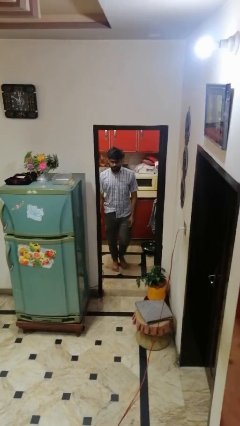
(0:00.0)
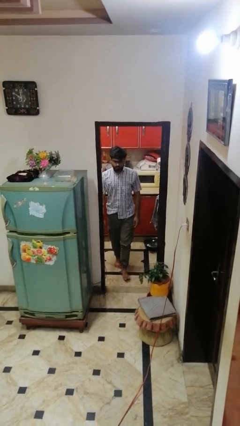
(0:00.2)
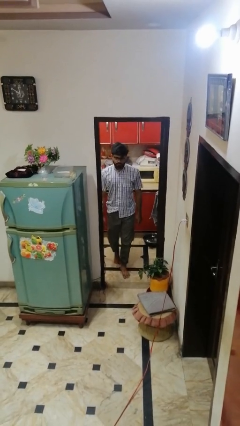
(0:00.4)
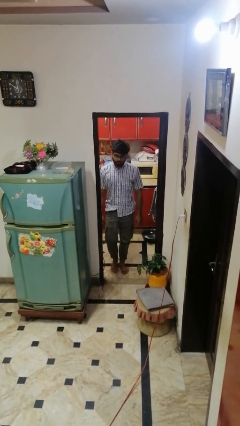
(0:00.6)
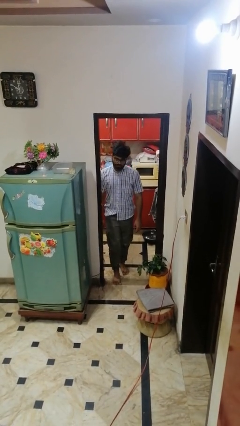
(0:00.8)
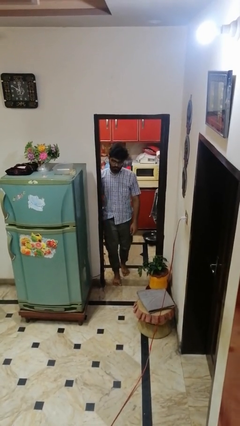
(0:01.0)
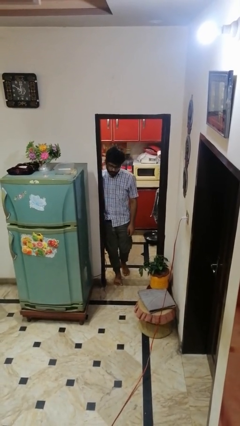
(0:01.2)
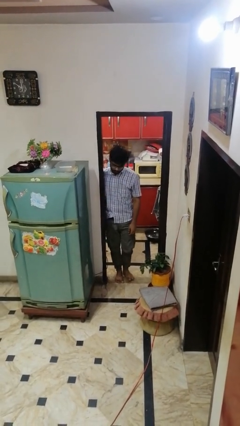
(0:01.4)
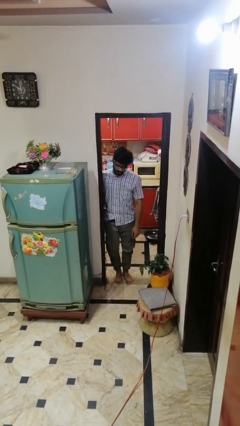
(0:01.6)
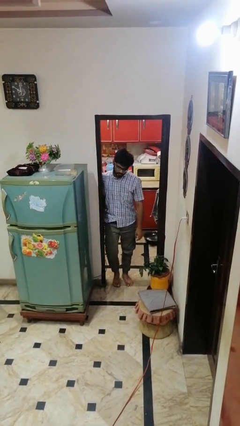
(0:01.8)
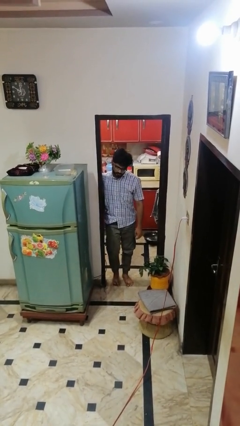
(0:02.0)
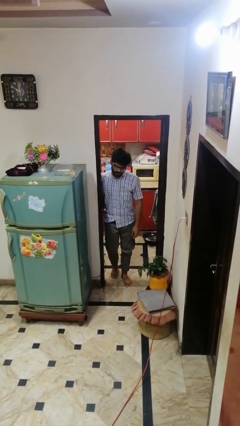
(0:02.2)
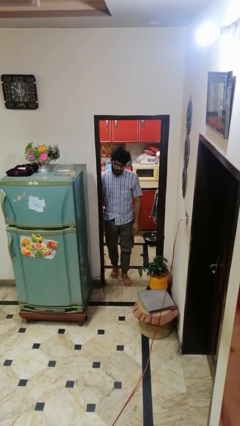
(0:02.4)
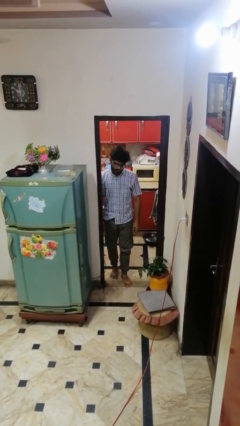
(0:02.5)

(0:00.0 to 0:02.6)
person bumps into wall

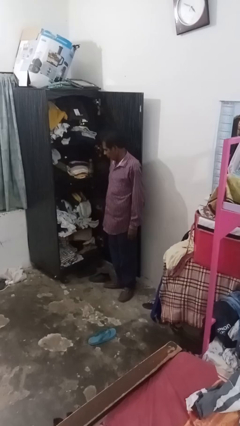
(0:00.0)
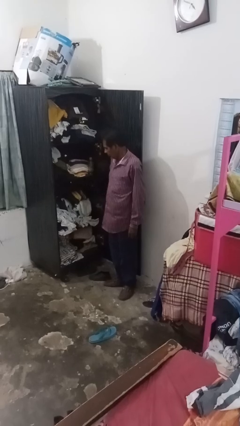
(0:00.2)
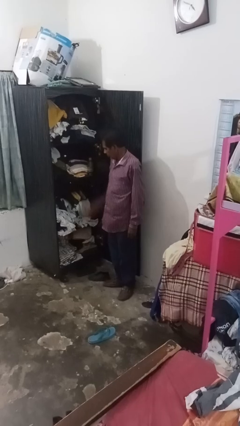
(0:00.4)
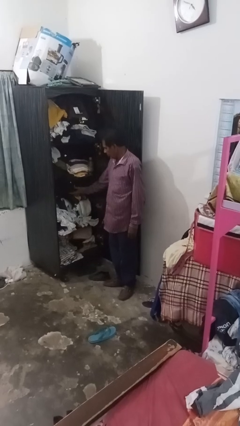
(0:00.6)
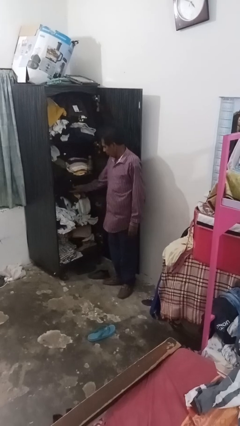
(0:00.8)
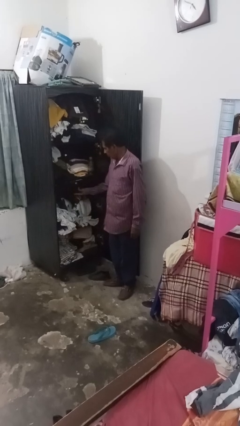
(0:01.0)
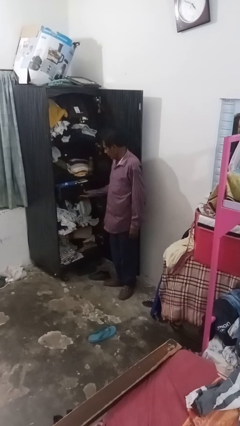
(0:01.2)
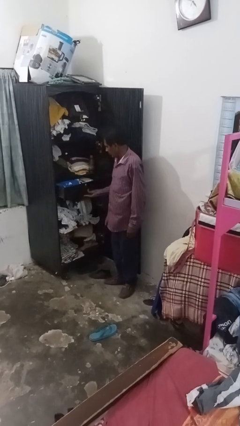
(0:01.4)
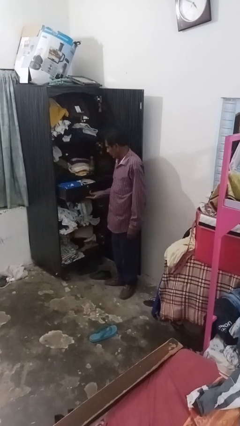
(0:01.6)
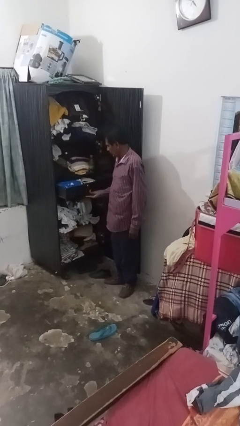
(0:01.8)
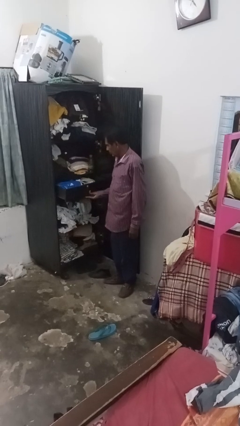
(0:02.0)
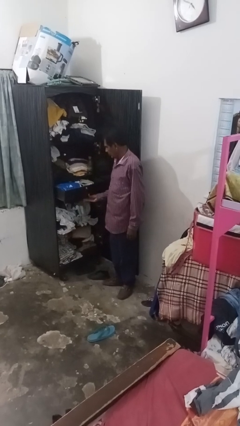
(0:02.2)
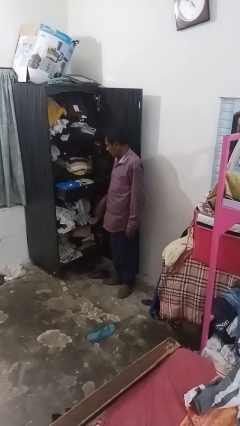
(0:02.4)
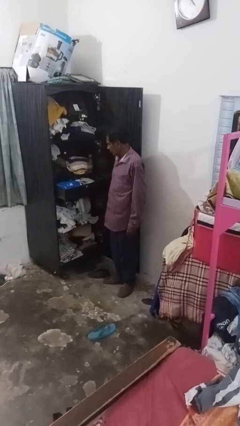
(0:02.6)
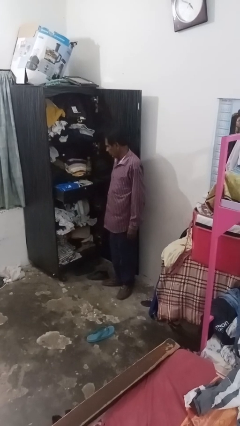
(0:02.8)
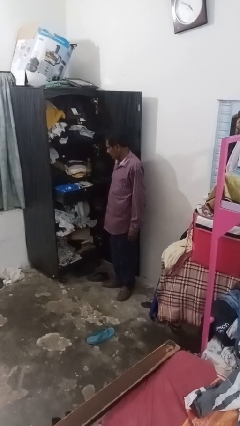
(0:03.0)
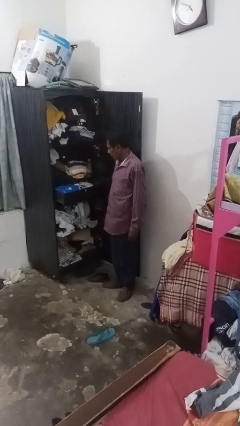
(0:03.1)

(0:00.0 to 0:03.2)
person opens dresser drawer

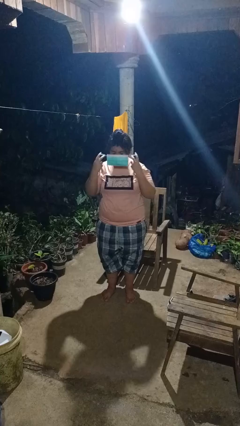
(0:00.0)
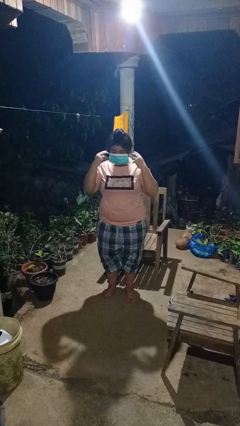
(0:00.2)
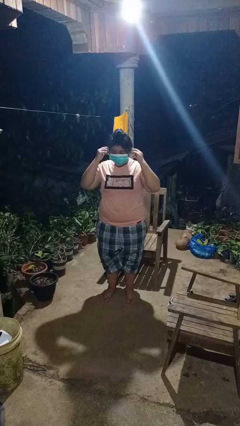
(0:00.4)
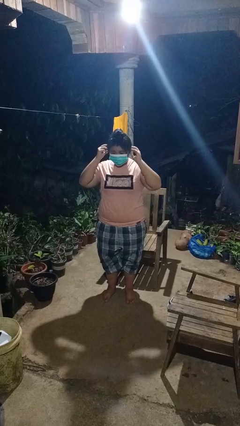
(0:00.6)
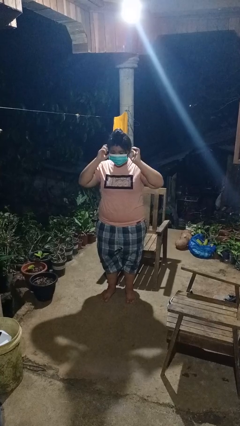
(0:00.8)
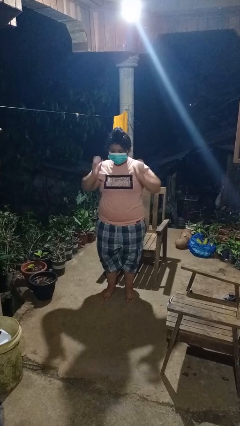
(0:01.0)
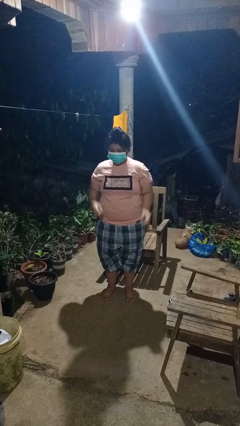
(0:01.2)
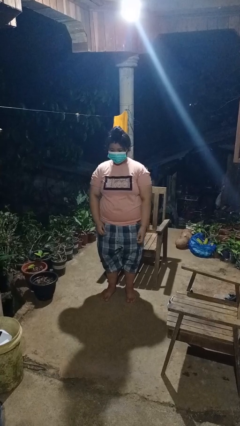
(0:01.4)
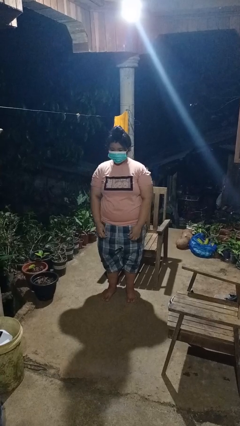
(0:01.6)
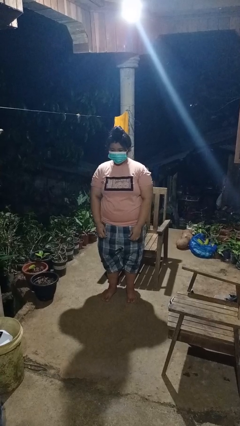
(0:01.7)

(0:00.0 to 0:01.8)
person puts on facemask

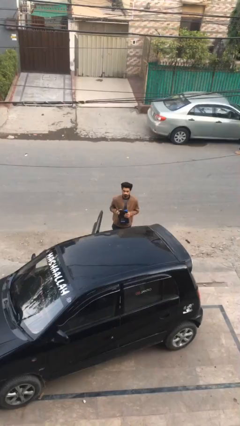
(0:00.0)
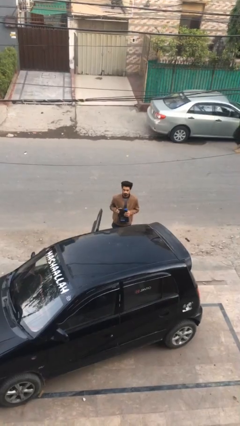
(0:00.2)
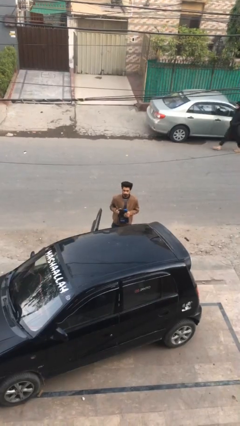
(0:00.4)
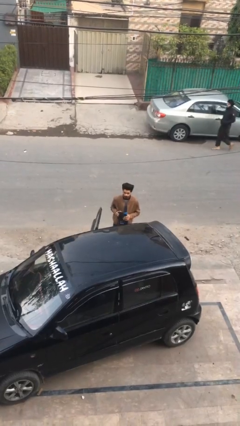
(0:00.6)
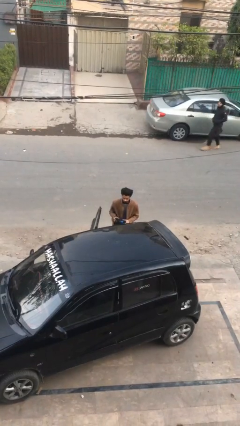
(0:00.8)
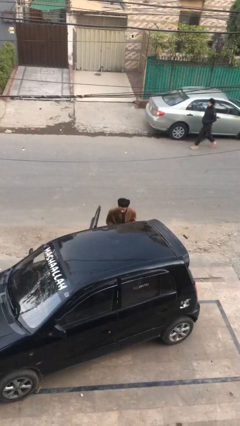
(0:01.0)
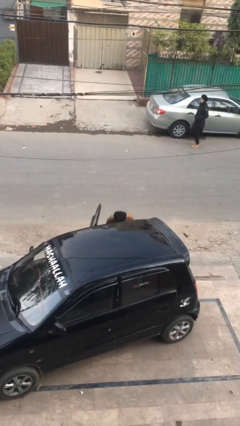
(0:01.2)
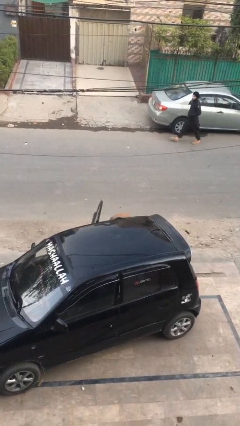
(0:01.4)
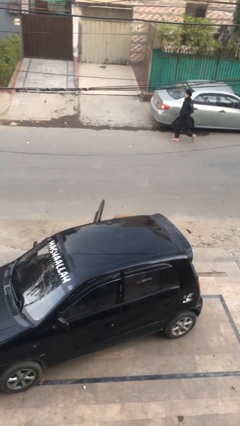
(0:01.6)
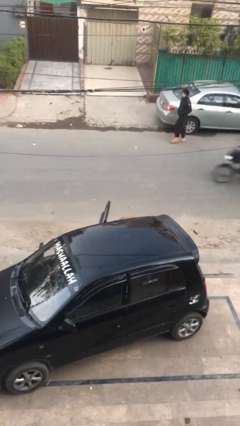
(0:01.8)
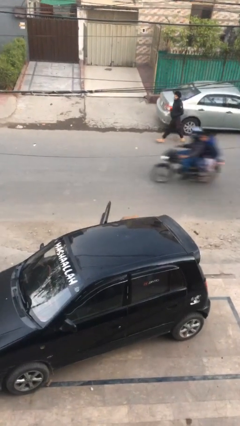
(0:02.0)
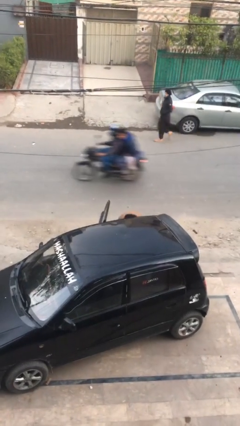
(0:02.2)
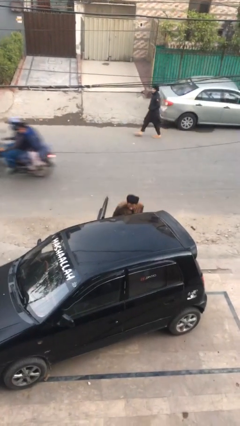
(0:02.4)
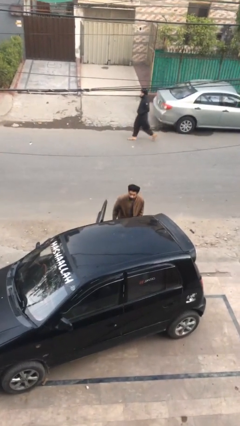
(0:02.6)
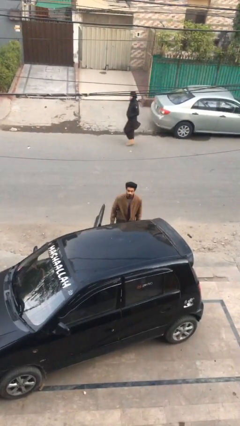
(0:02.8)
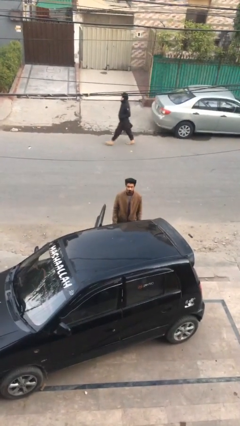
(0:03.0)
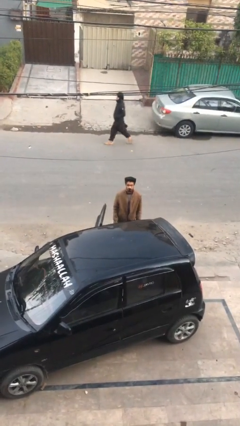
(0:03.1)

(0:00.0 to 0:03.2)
person loads car

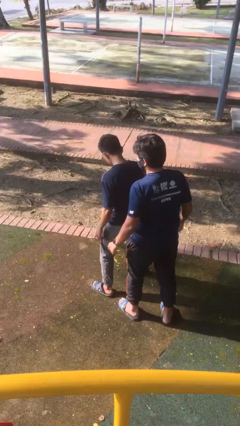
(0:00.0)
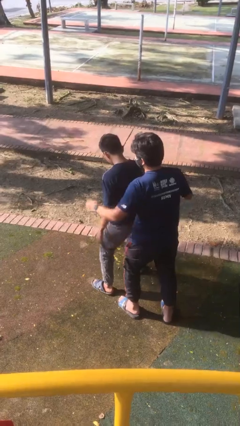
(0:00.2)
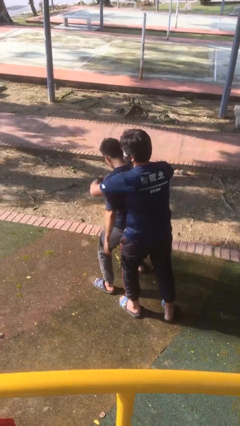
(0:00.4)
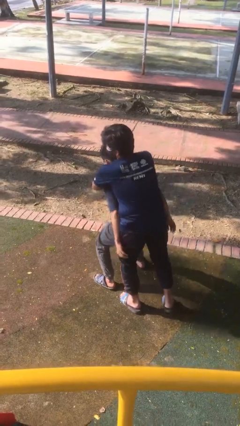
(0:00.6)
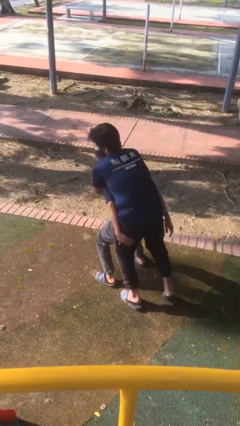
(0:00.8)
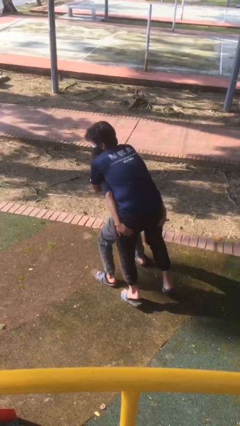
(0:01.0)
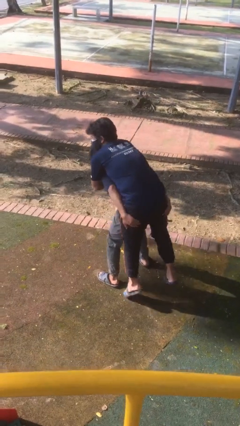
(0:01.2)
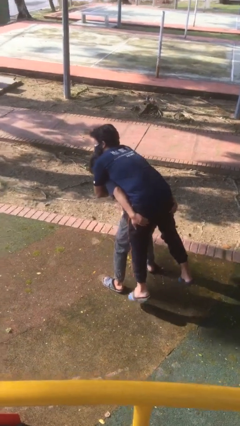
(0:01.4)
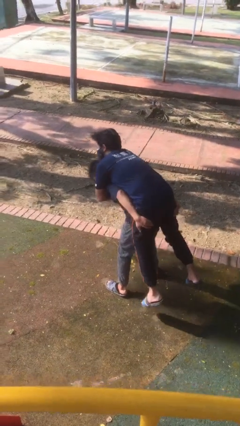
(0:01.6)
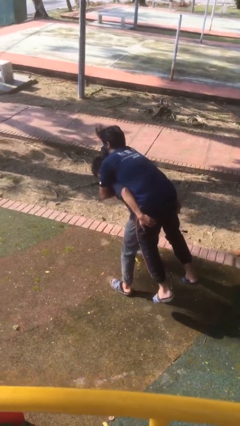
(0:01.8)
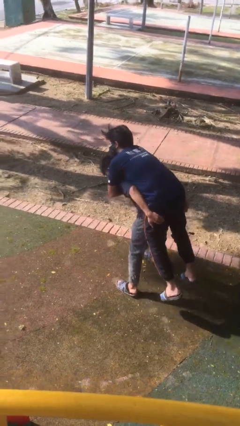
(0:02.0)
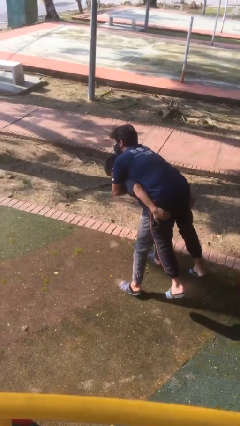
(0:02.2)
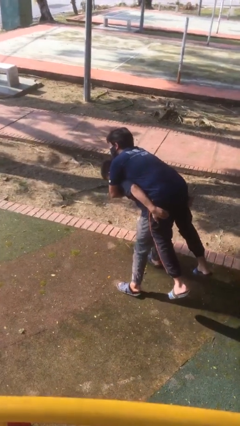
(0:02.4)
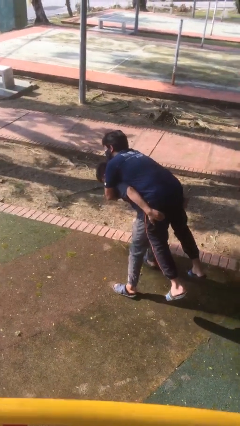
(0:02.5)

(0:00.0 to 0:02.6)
person carries person over shoulder

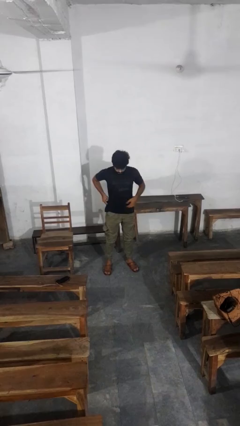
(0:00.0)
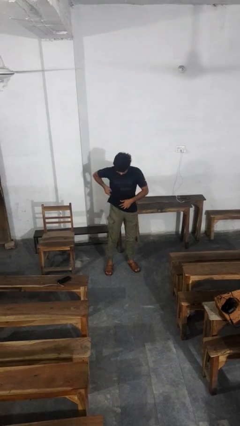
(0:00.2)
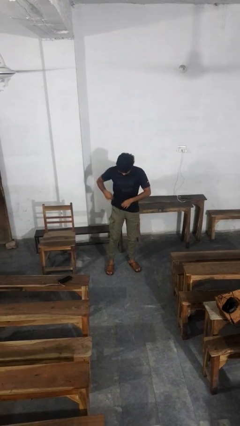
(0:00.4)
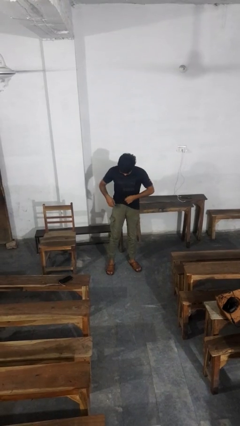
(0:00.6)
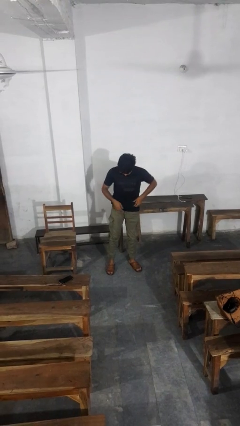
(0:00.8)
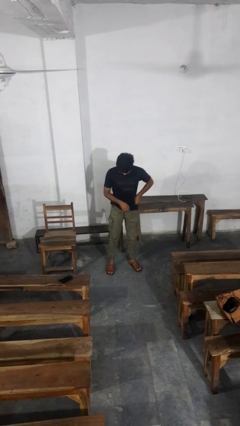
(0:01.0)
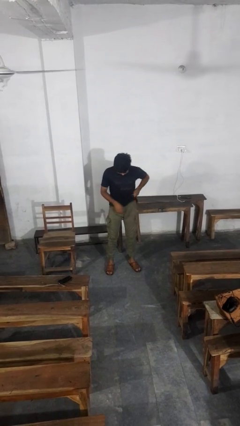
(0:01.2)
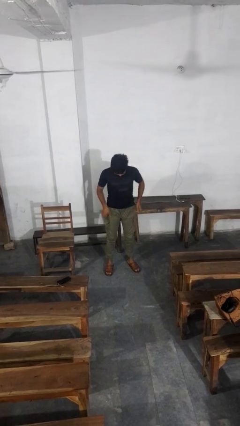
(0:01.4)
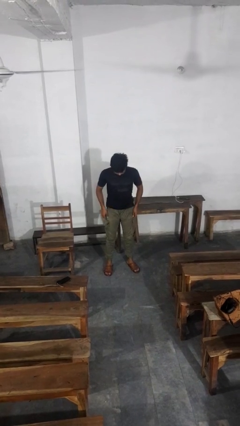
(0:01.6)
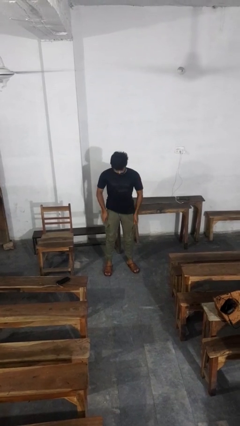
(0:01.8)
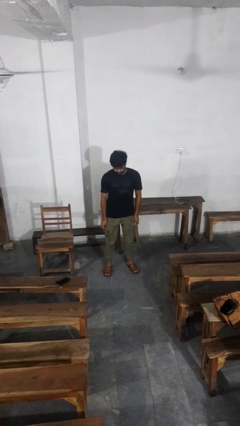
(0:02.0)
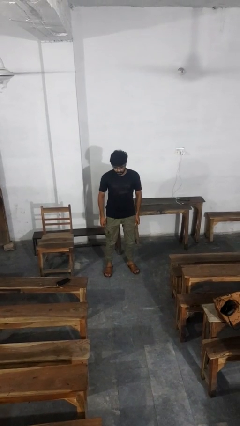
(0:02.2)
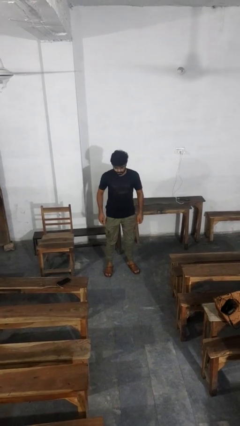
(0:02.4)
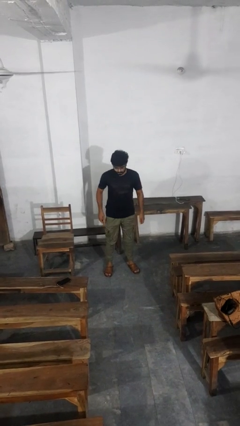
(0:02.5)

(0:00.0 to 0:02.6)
person hikes up pants

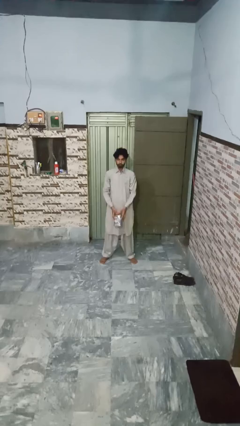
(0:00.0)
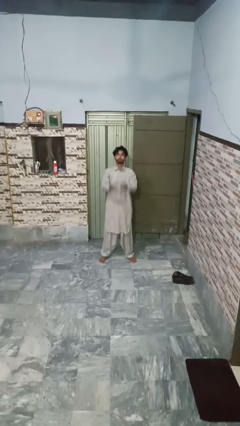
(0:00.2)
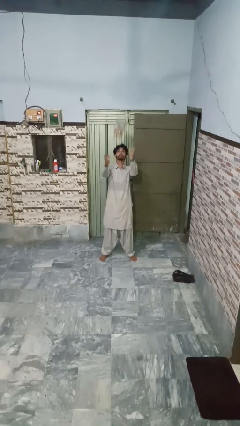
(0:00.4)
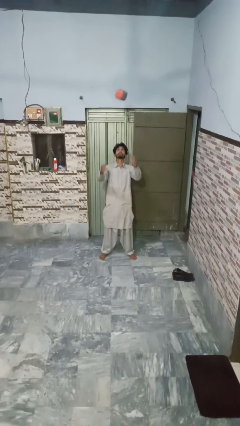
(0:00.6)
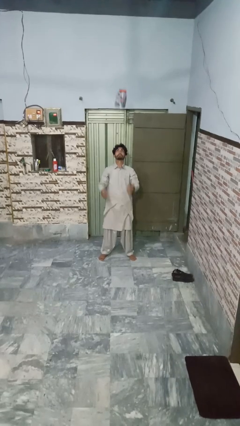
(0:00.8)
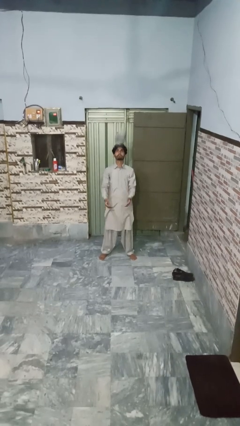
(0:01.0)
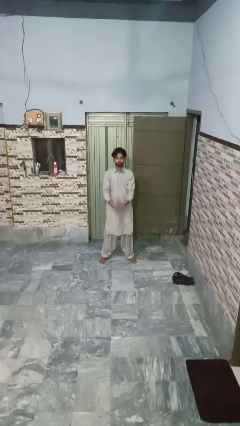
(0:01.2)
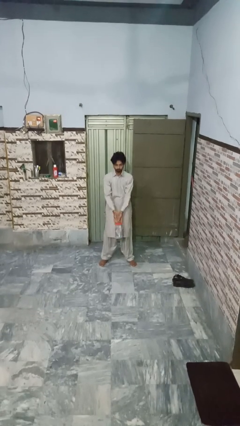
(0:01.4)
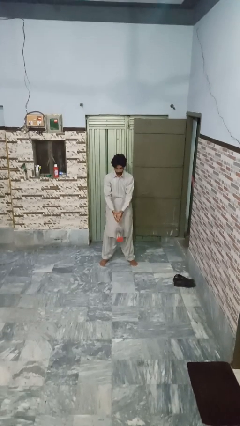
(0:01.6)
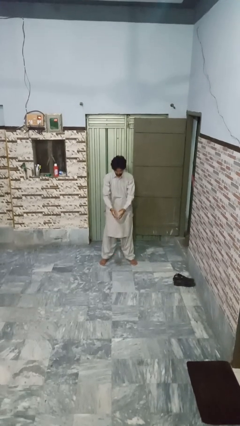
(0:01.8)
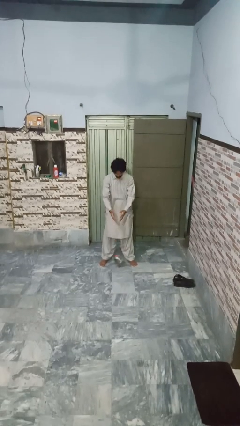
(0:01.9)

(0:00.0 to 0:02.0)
person drops object
